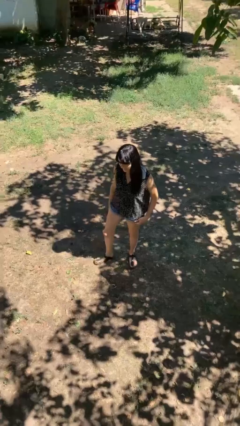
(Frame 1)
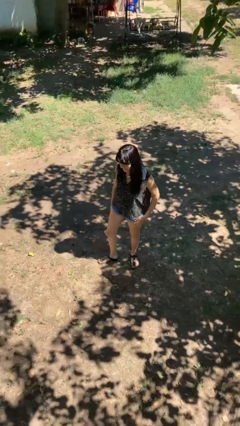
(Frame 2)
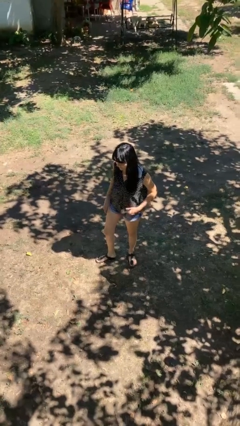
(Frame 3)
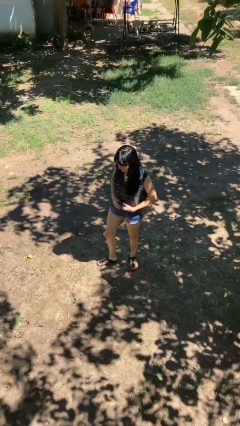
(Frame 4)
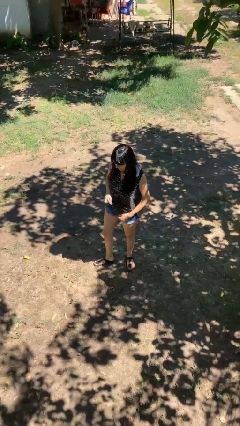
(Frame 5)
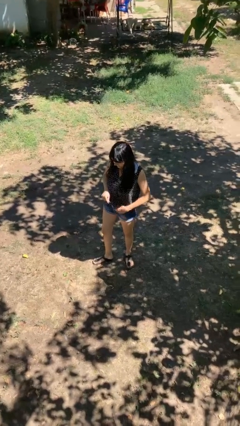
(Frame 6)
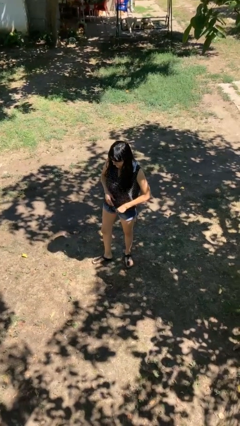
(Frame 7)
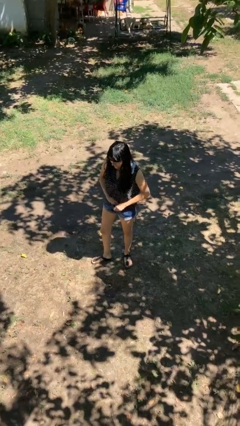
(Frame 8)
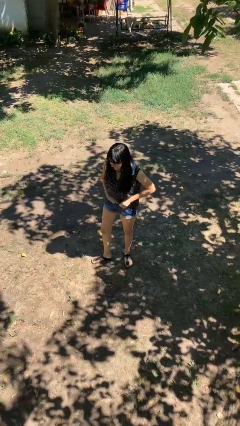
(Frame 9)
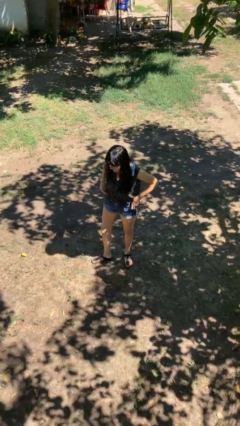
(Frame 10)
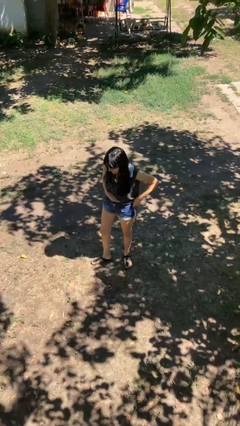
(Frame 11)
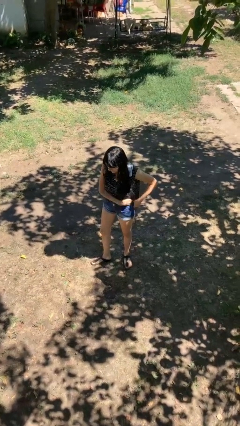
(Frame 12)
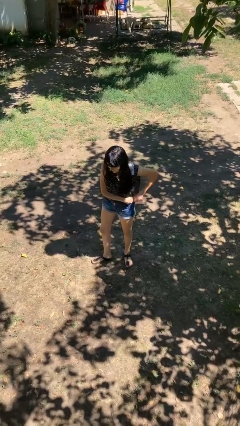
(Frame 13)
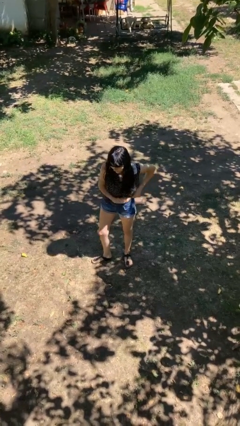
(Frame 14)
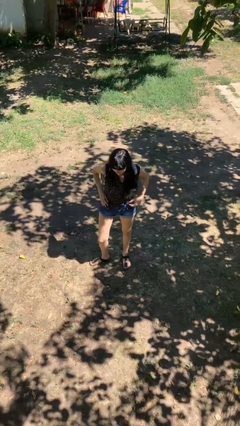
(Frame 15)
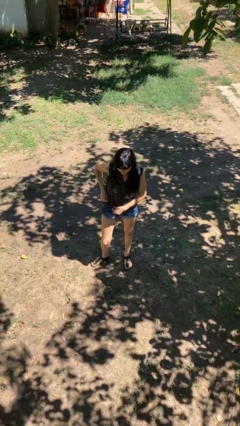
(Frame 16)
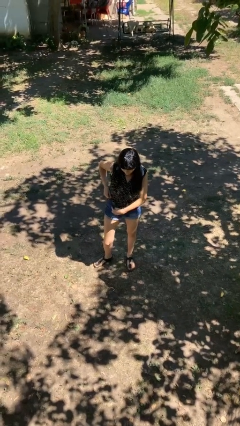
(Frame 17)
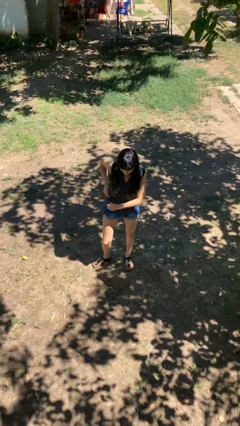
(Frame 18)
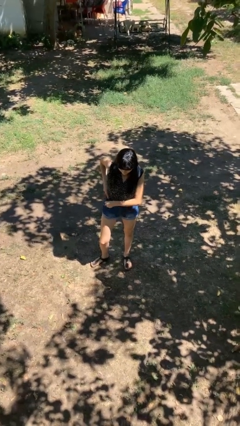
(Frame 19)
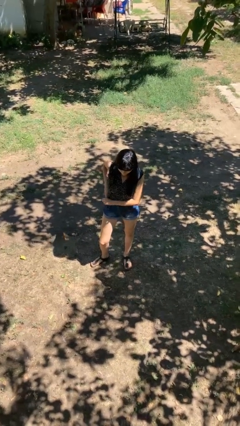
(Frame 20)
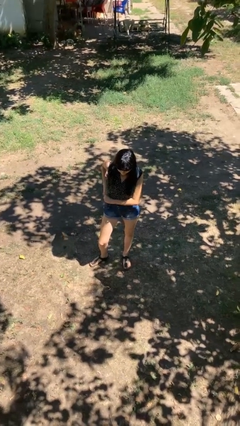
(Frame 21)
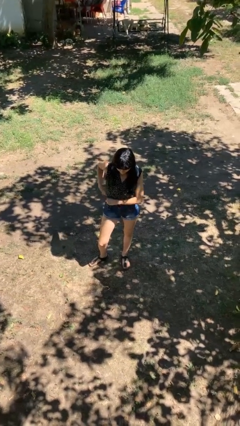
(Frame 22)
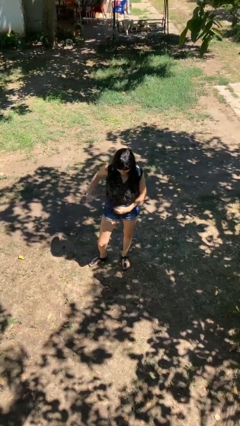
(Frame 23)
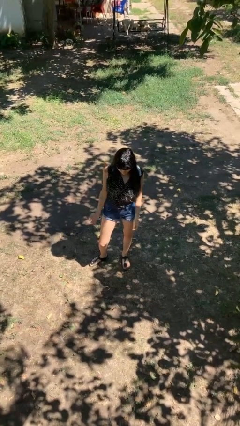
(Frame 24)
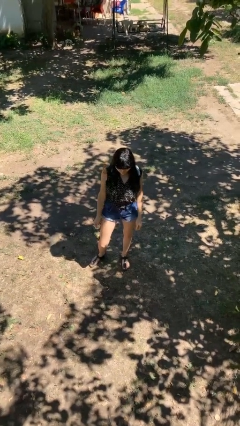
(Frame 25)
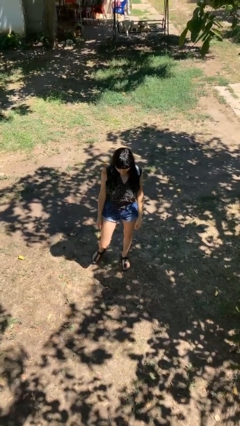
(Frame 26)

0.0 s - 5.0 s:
person tucks in shirt

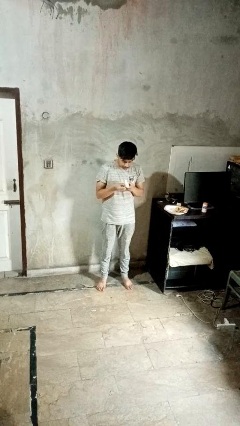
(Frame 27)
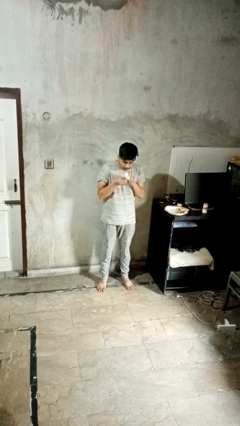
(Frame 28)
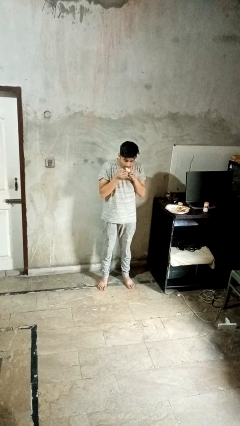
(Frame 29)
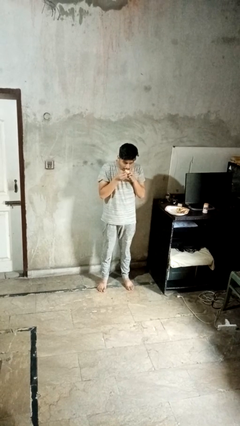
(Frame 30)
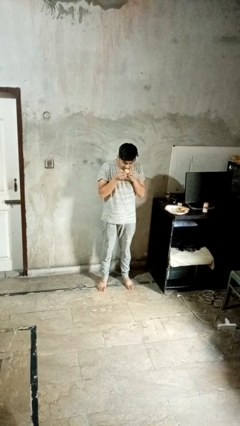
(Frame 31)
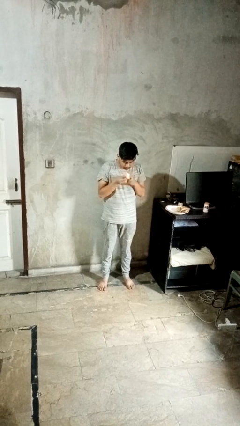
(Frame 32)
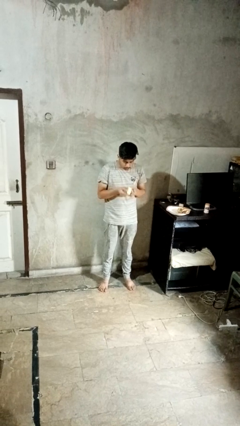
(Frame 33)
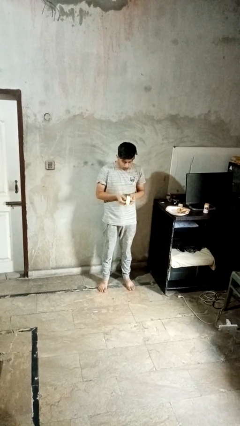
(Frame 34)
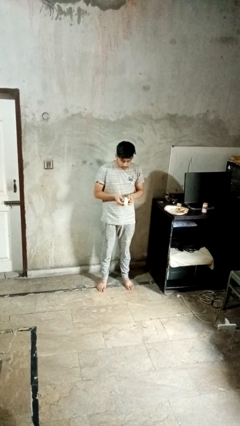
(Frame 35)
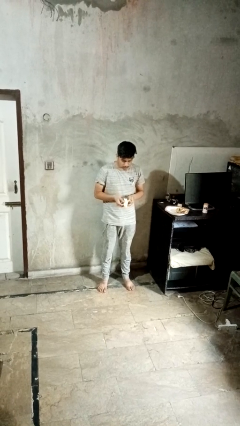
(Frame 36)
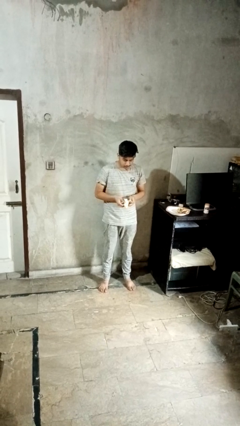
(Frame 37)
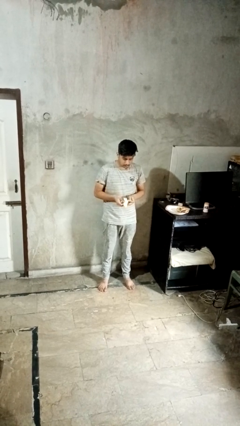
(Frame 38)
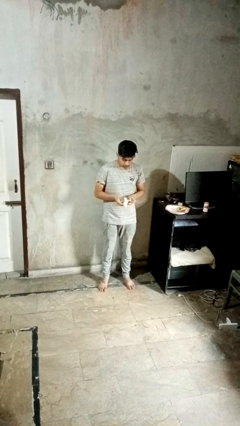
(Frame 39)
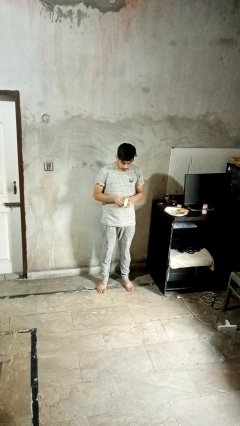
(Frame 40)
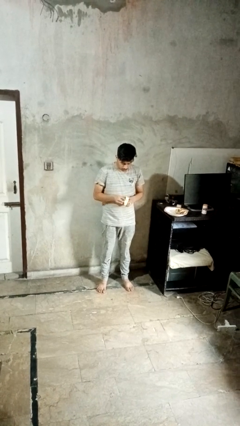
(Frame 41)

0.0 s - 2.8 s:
person eats banana

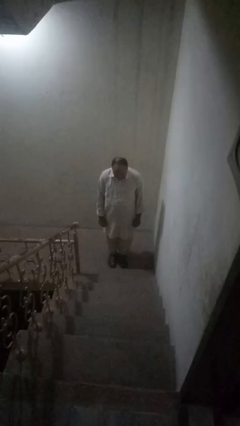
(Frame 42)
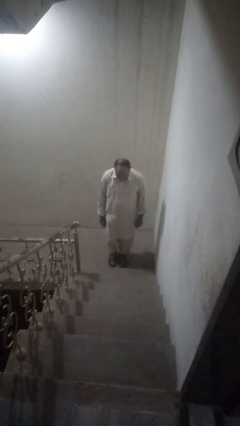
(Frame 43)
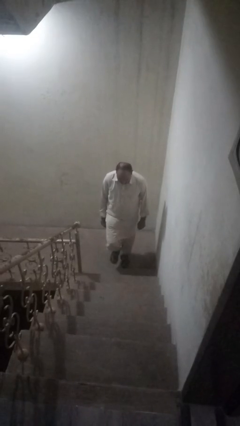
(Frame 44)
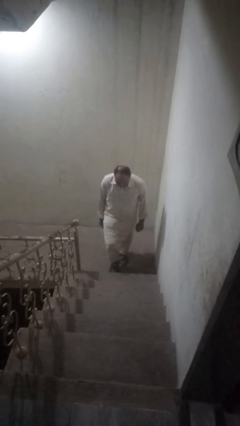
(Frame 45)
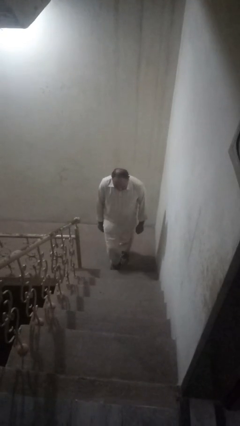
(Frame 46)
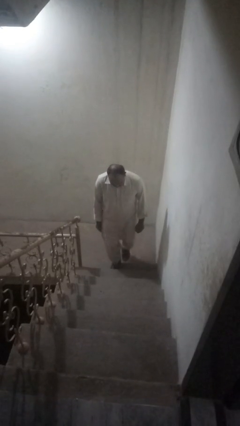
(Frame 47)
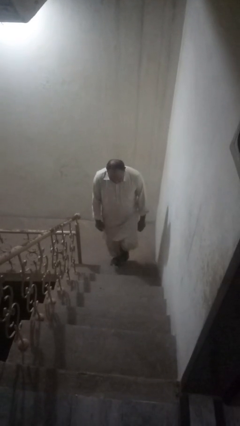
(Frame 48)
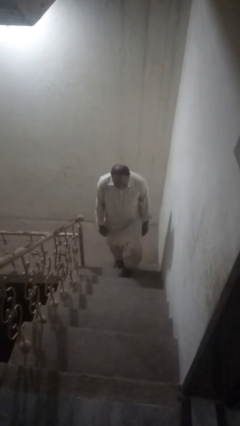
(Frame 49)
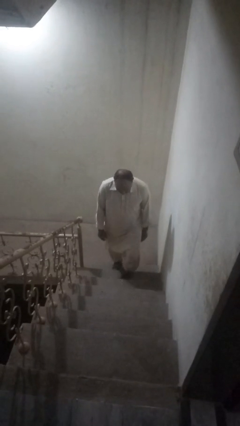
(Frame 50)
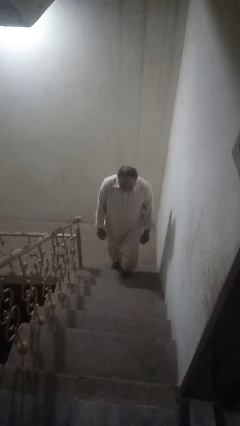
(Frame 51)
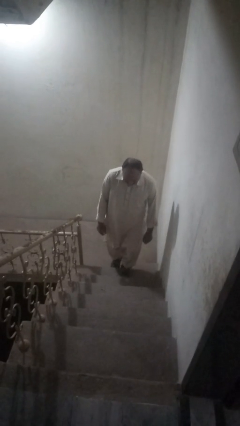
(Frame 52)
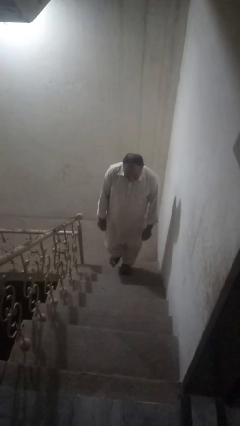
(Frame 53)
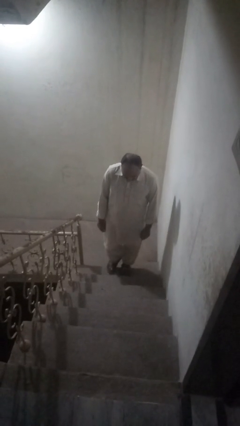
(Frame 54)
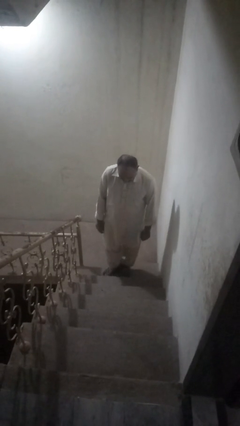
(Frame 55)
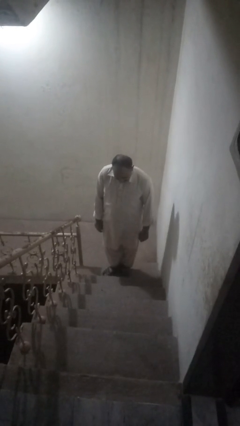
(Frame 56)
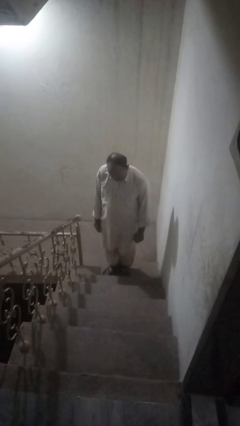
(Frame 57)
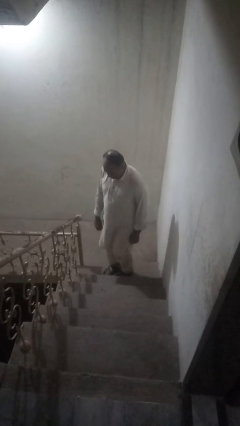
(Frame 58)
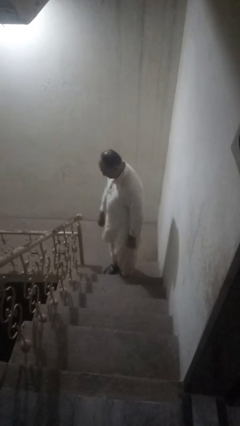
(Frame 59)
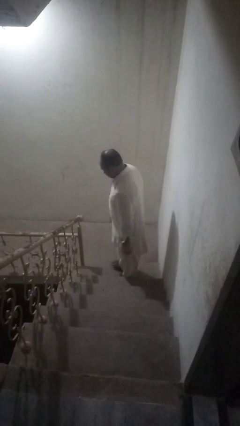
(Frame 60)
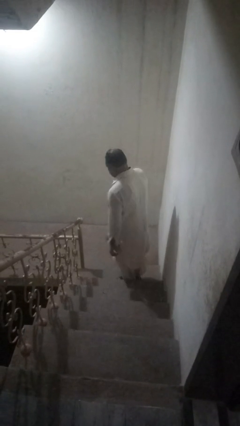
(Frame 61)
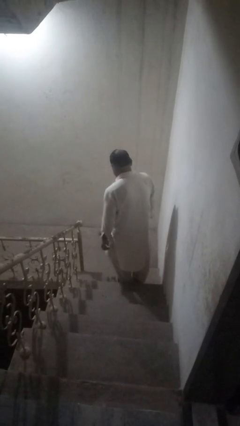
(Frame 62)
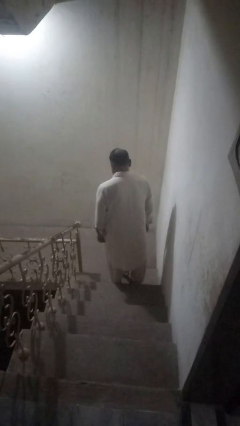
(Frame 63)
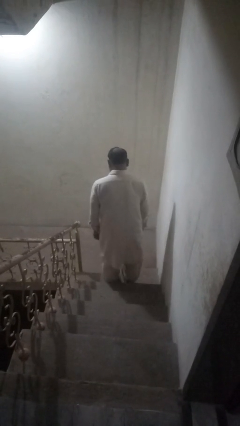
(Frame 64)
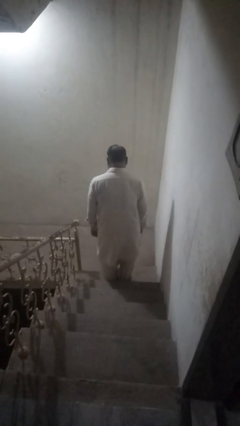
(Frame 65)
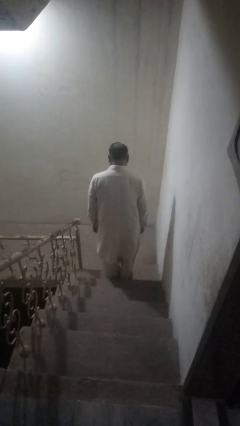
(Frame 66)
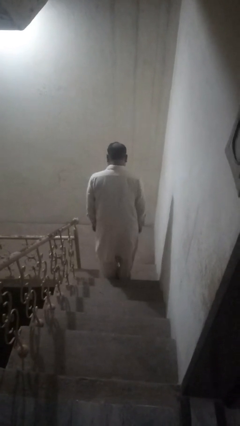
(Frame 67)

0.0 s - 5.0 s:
person climbs up stairs

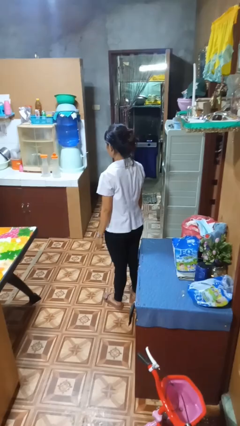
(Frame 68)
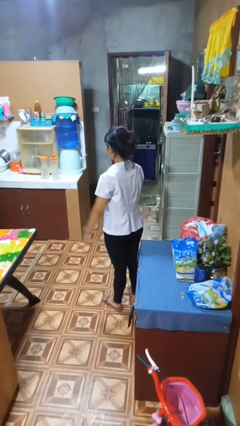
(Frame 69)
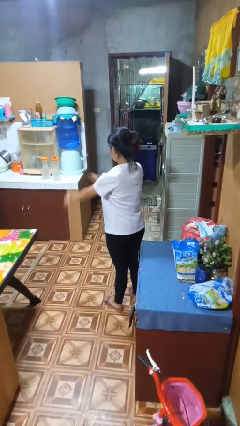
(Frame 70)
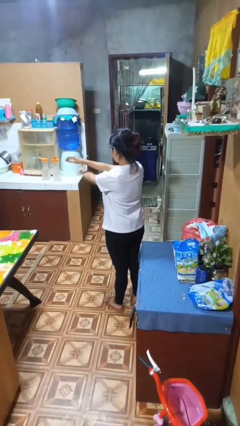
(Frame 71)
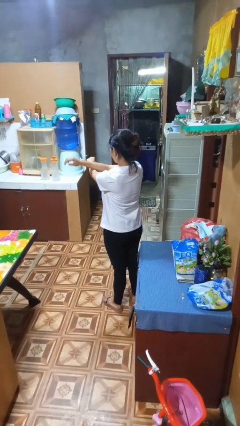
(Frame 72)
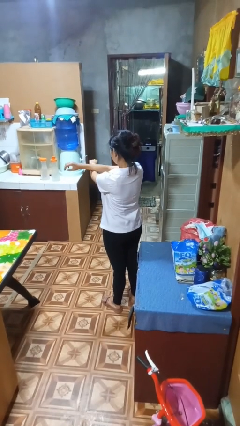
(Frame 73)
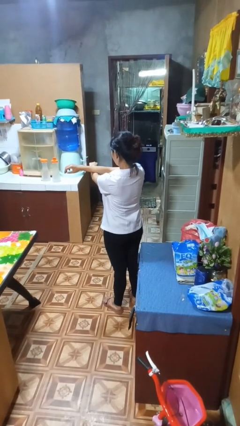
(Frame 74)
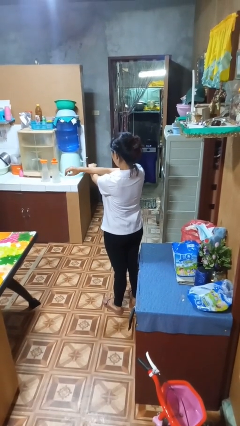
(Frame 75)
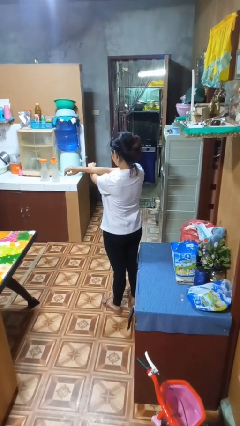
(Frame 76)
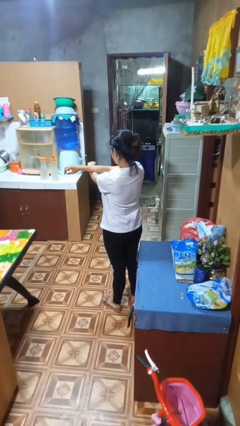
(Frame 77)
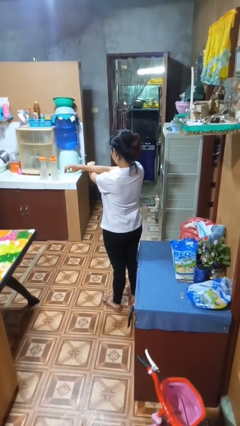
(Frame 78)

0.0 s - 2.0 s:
person crosses arms

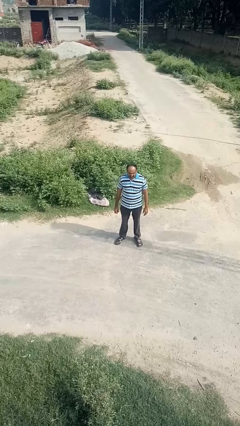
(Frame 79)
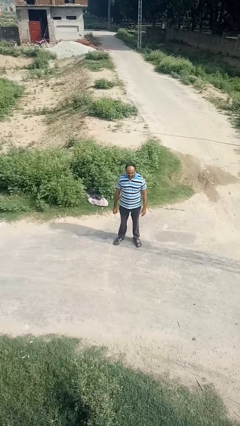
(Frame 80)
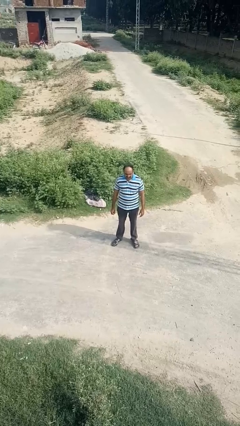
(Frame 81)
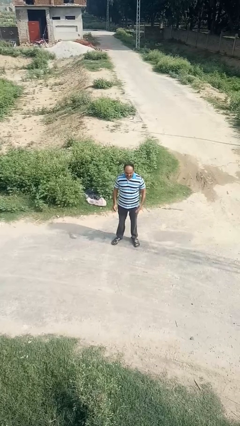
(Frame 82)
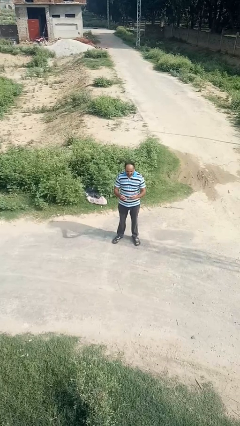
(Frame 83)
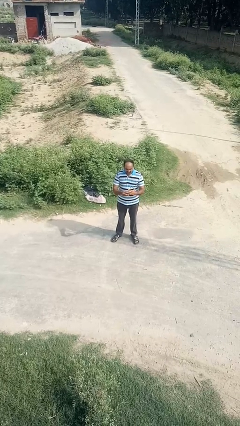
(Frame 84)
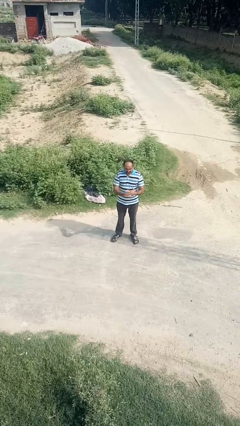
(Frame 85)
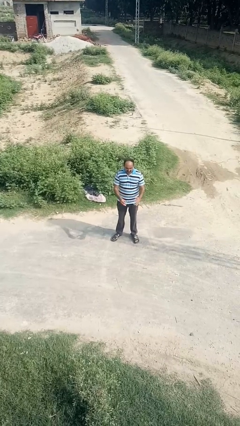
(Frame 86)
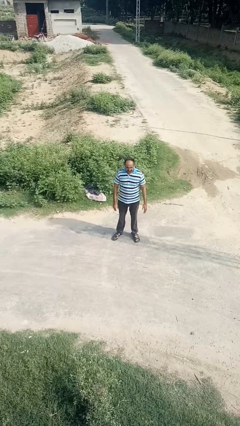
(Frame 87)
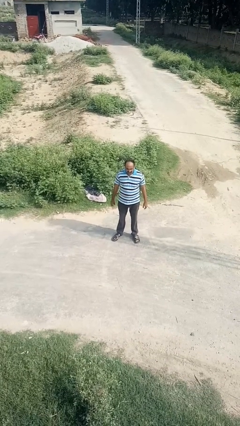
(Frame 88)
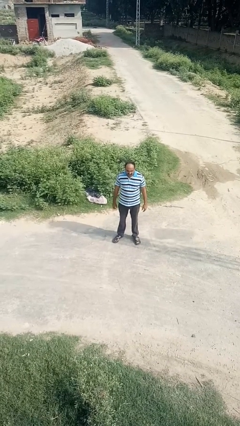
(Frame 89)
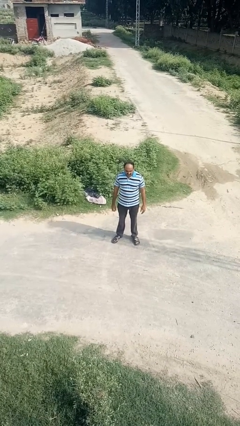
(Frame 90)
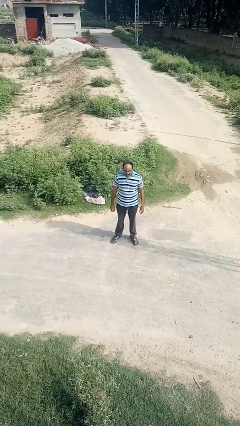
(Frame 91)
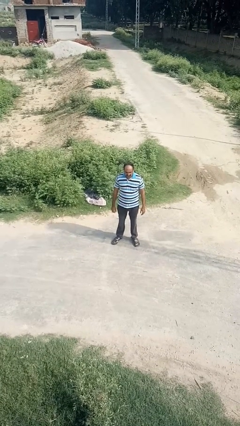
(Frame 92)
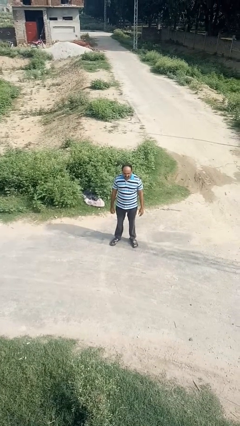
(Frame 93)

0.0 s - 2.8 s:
person puts on ring
